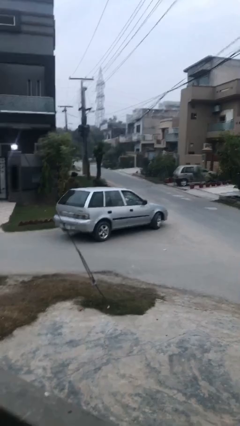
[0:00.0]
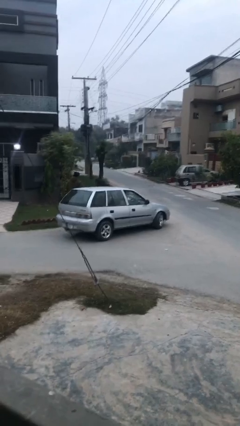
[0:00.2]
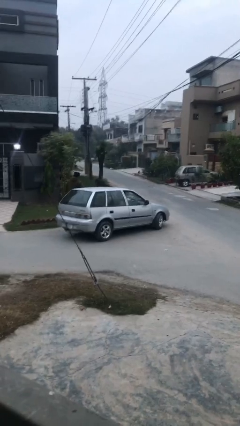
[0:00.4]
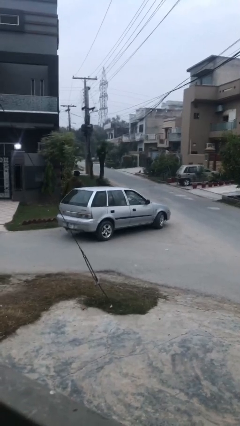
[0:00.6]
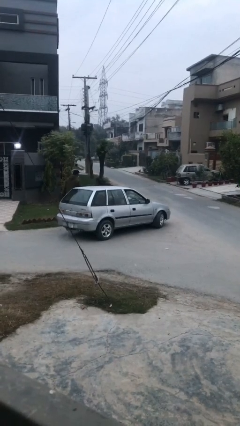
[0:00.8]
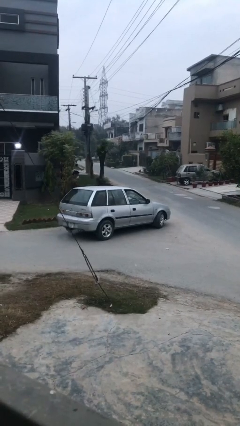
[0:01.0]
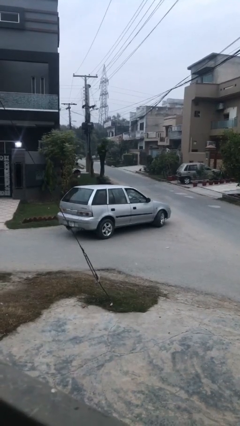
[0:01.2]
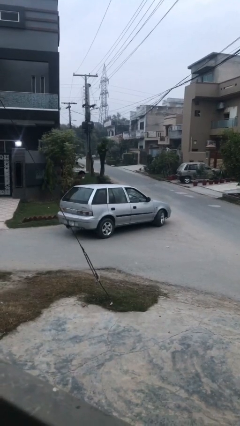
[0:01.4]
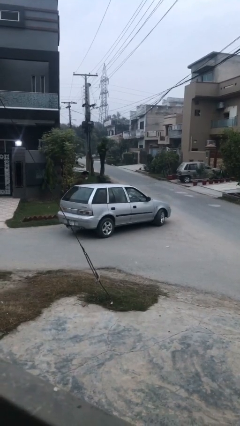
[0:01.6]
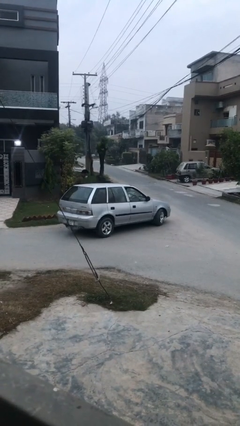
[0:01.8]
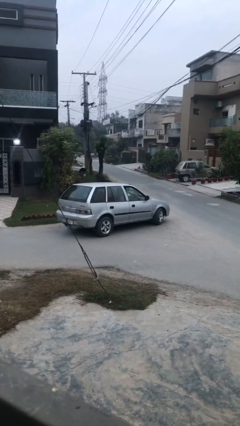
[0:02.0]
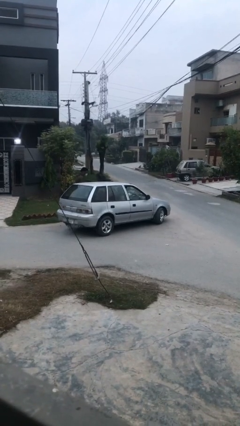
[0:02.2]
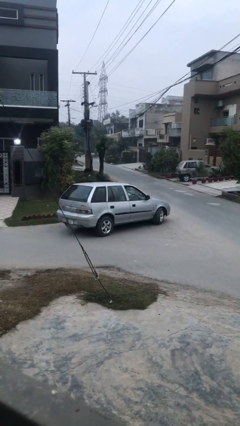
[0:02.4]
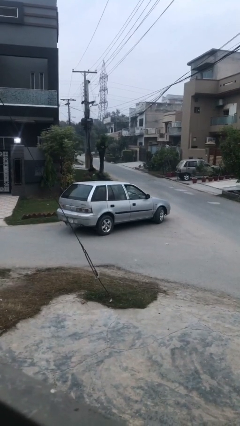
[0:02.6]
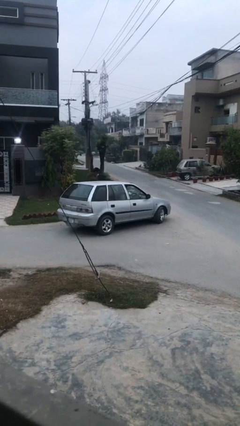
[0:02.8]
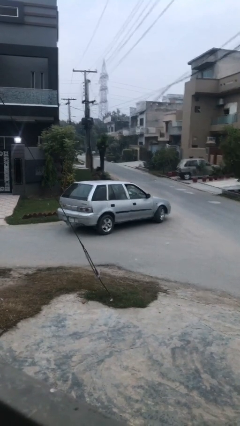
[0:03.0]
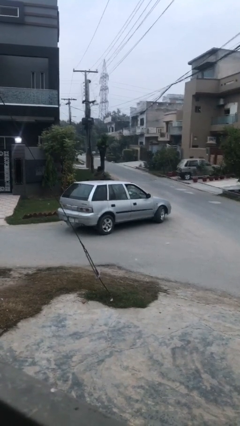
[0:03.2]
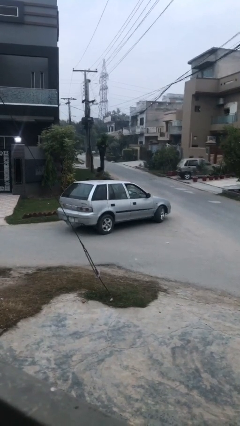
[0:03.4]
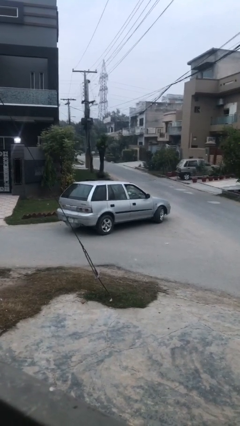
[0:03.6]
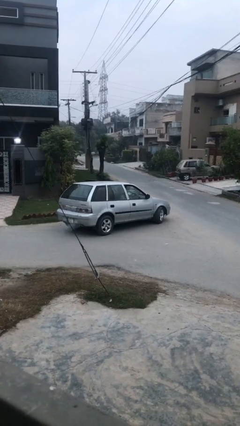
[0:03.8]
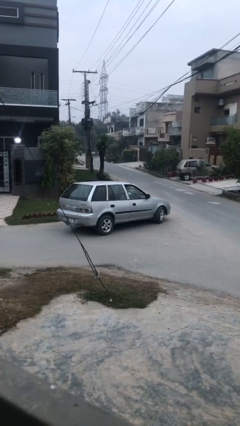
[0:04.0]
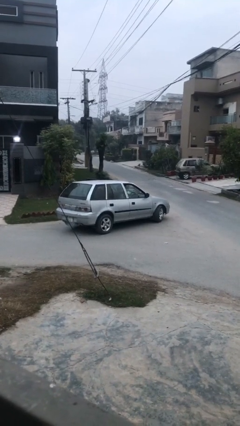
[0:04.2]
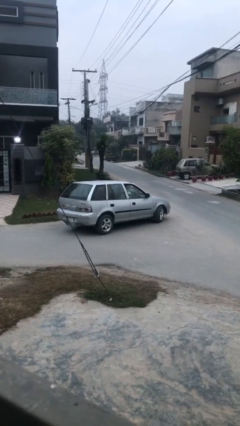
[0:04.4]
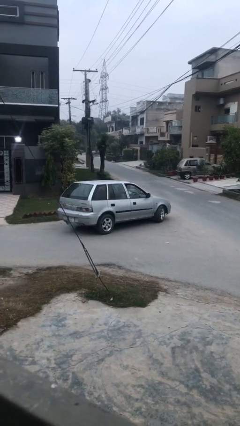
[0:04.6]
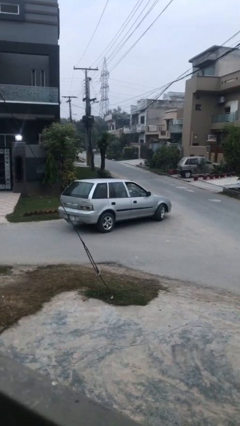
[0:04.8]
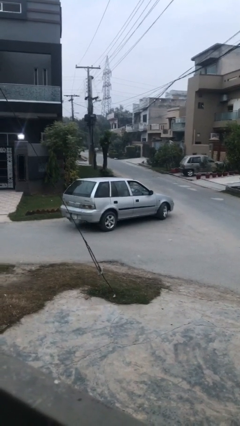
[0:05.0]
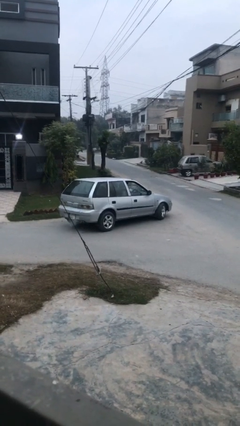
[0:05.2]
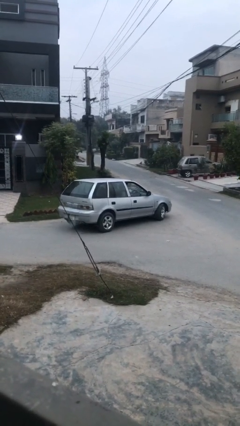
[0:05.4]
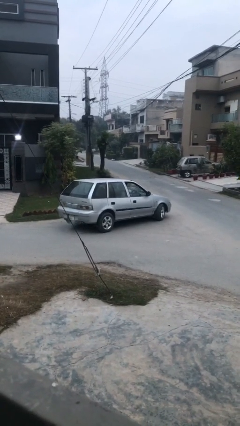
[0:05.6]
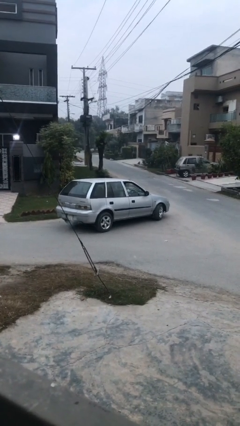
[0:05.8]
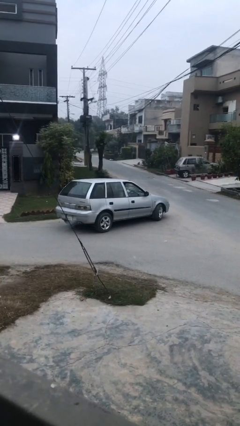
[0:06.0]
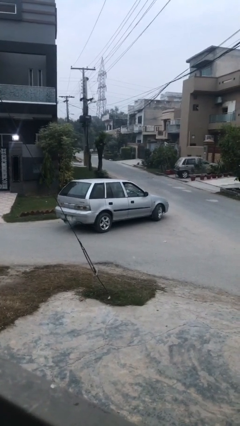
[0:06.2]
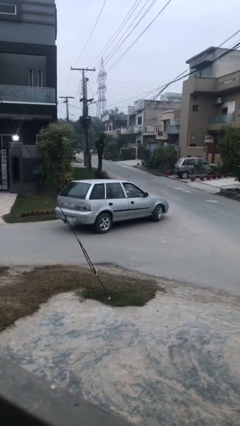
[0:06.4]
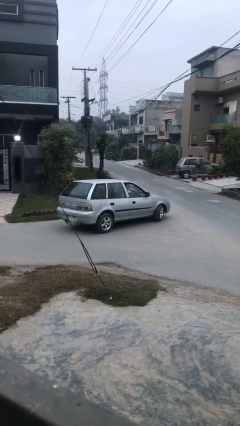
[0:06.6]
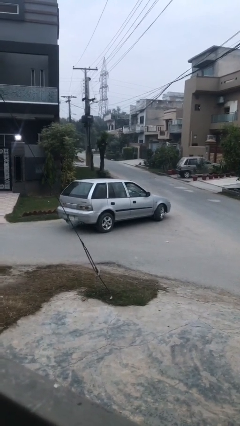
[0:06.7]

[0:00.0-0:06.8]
car picks up person

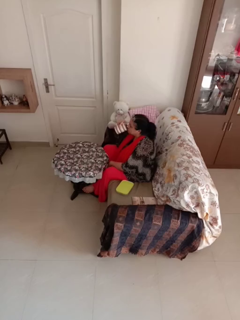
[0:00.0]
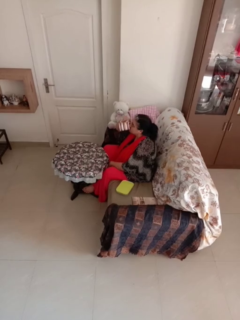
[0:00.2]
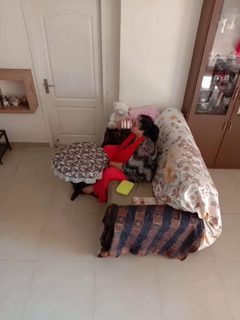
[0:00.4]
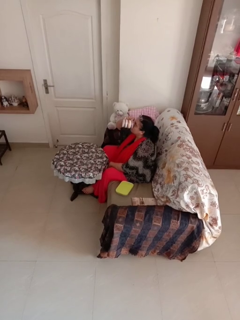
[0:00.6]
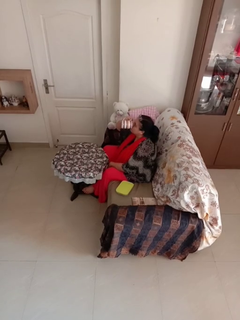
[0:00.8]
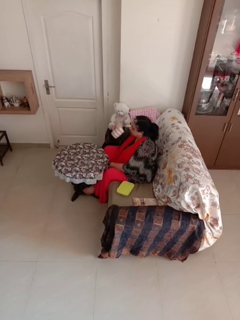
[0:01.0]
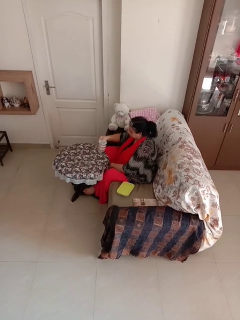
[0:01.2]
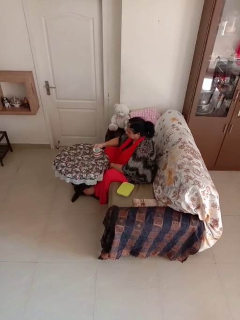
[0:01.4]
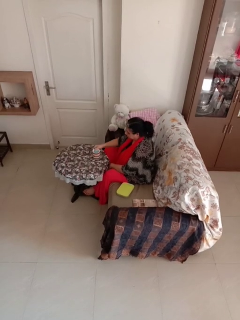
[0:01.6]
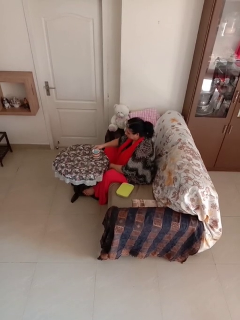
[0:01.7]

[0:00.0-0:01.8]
person drinks from mug

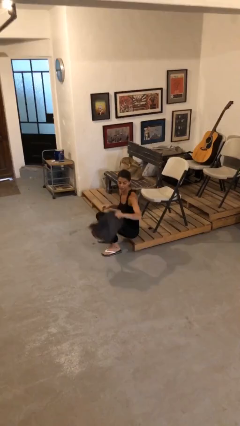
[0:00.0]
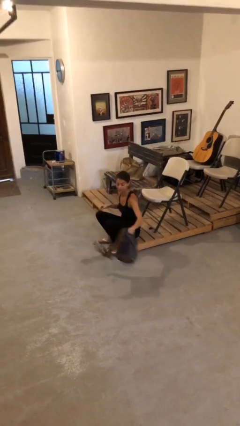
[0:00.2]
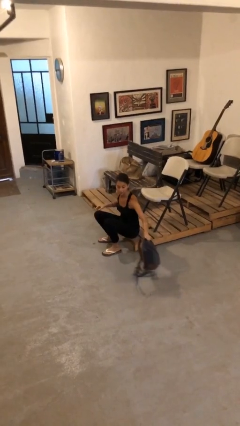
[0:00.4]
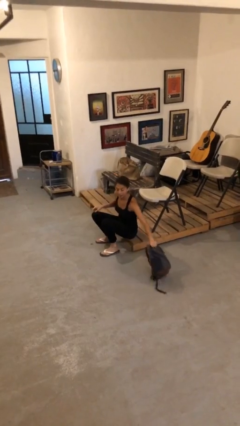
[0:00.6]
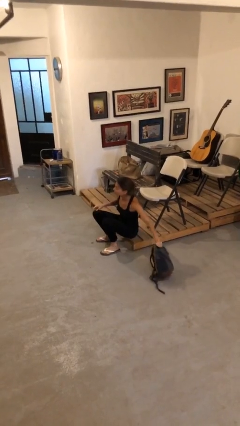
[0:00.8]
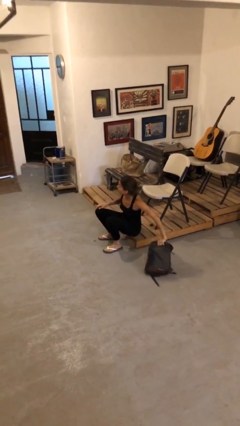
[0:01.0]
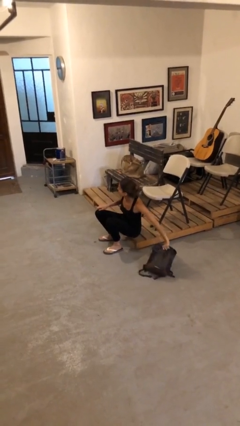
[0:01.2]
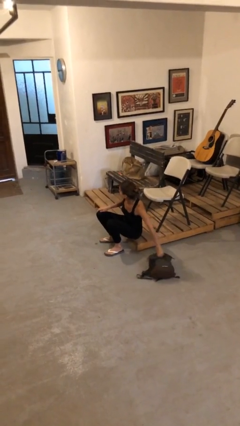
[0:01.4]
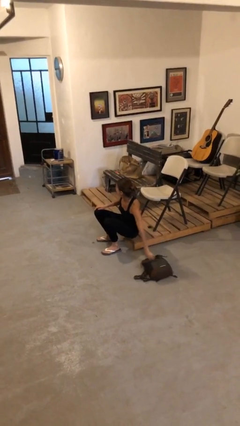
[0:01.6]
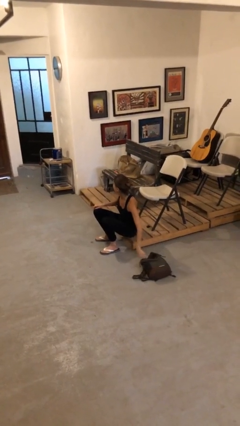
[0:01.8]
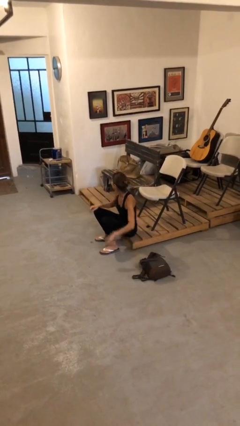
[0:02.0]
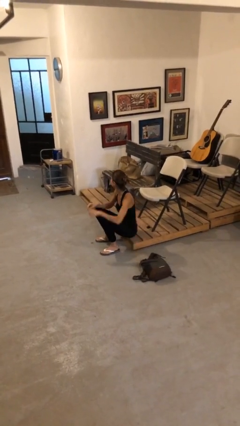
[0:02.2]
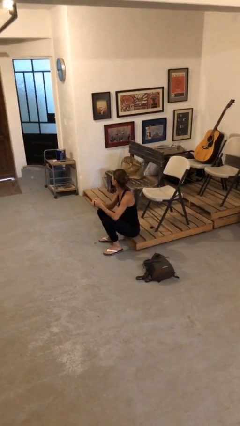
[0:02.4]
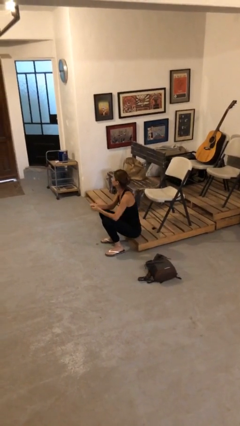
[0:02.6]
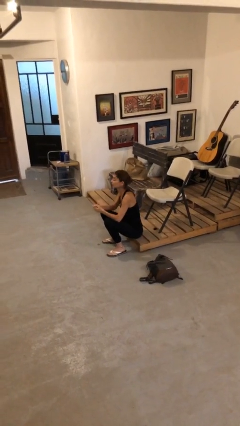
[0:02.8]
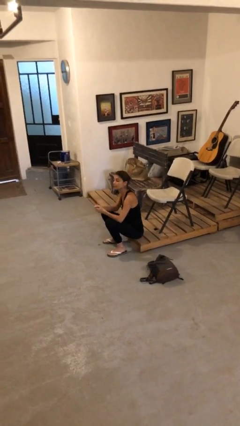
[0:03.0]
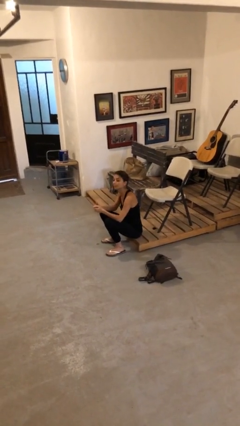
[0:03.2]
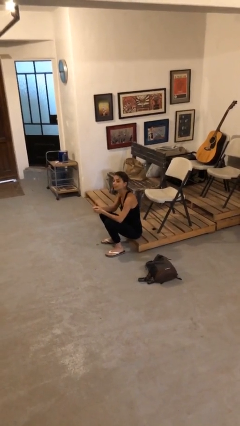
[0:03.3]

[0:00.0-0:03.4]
person puts down object on floor

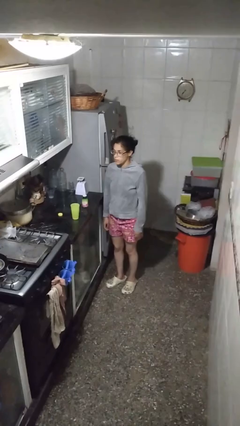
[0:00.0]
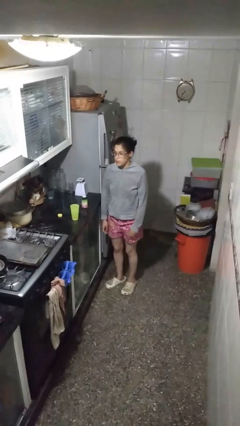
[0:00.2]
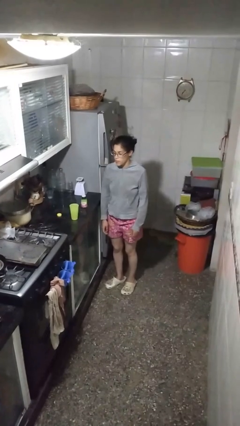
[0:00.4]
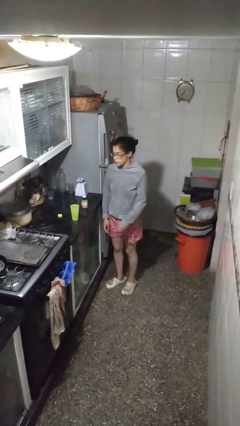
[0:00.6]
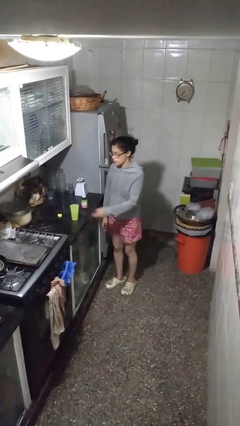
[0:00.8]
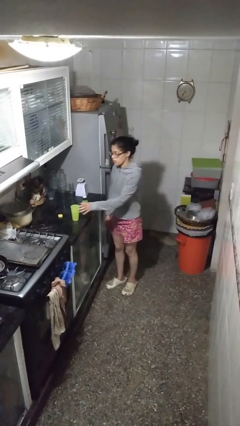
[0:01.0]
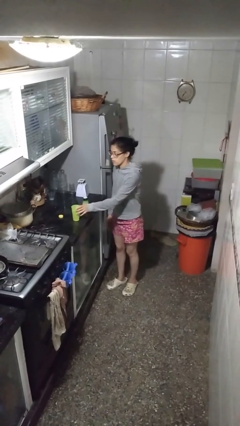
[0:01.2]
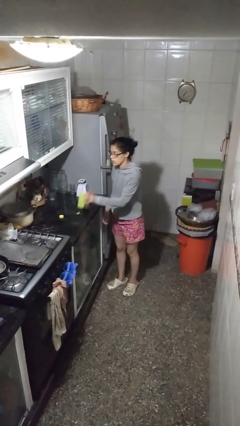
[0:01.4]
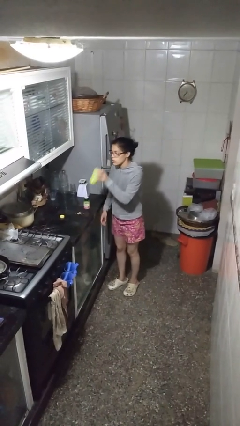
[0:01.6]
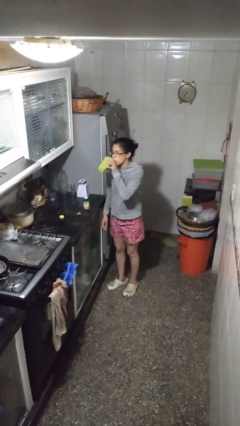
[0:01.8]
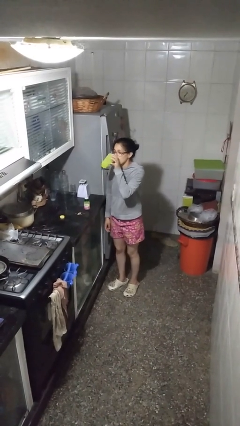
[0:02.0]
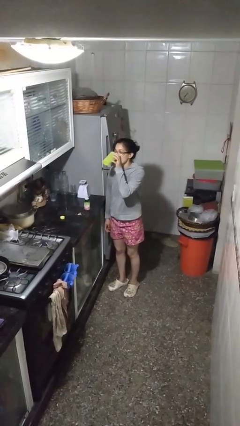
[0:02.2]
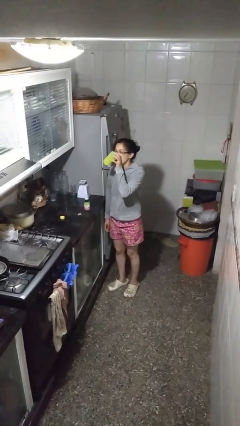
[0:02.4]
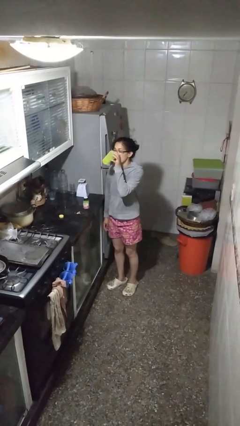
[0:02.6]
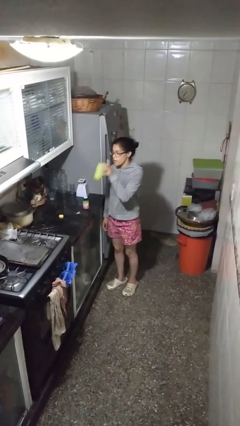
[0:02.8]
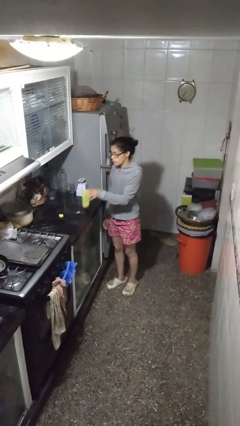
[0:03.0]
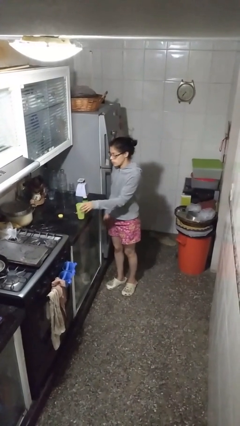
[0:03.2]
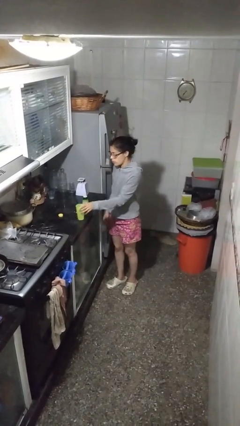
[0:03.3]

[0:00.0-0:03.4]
person drinks from cup

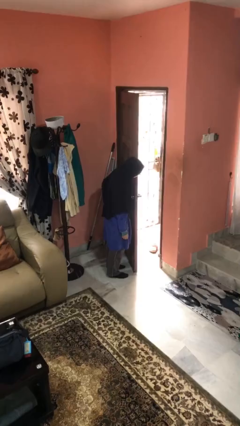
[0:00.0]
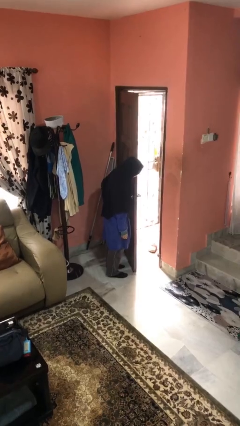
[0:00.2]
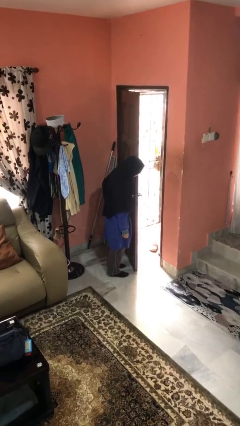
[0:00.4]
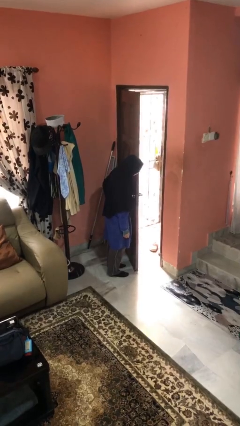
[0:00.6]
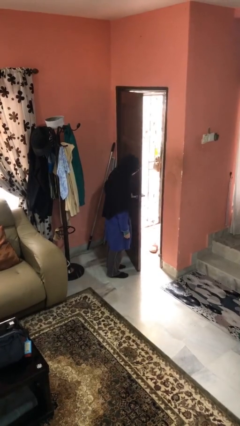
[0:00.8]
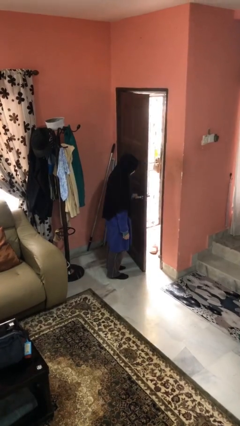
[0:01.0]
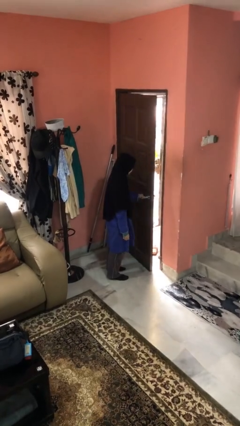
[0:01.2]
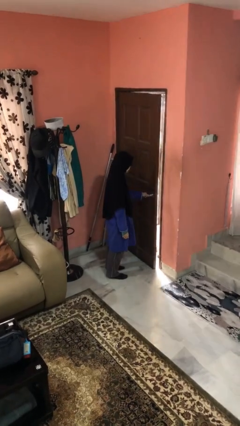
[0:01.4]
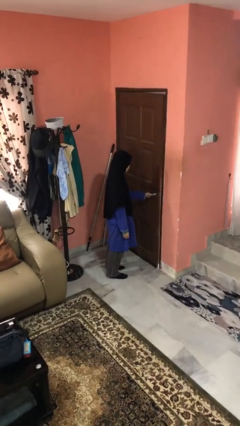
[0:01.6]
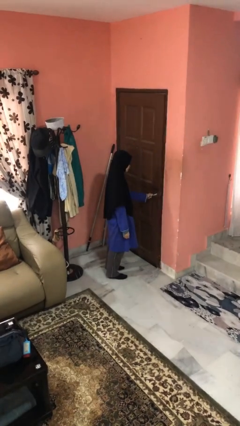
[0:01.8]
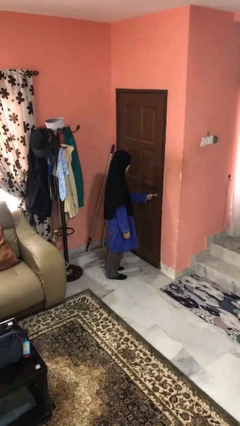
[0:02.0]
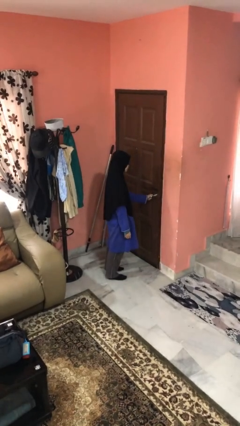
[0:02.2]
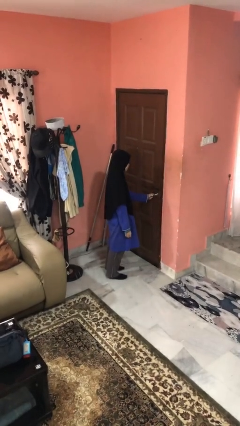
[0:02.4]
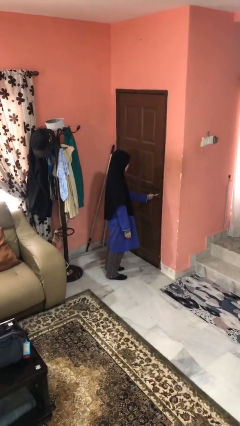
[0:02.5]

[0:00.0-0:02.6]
person closes facility door
